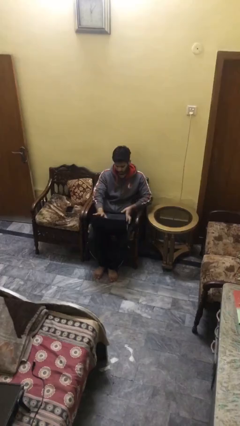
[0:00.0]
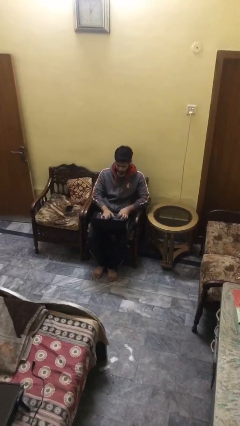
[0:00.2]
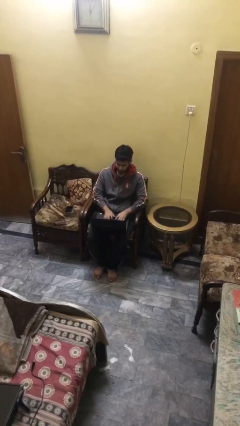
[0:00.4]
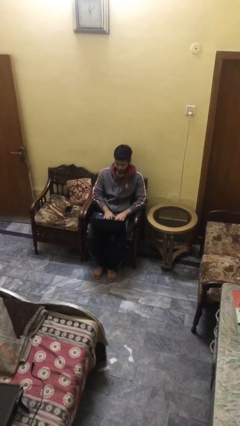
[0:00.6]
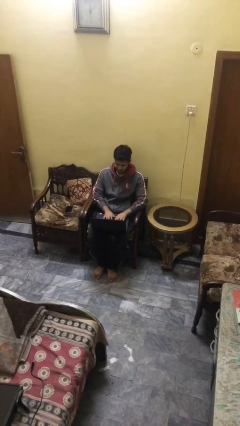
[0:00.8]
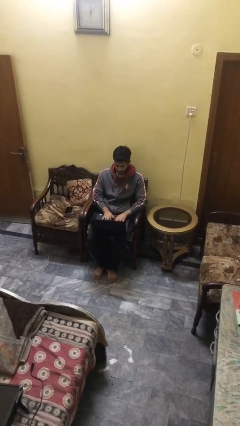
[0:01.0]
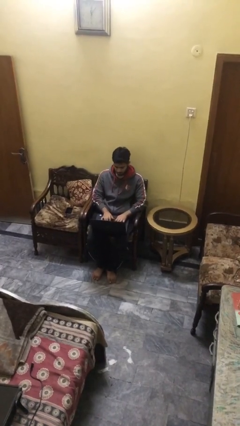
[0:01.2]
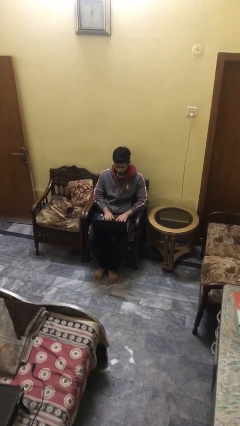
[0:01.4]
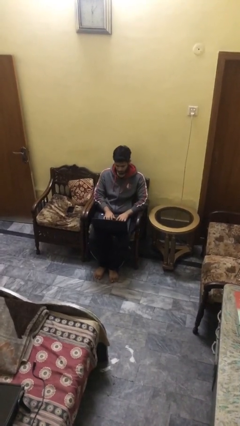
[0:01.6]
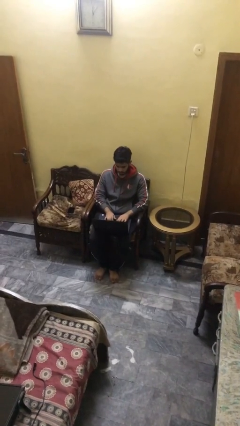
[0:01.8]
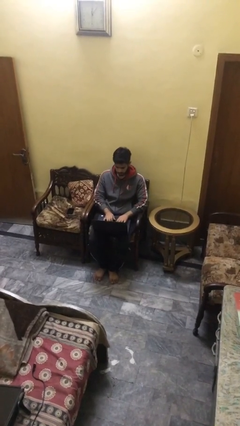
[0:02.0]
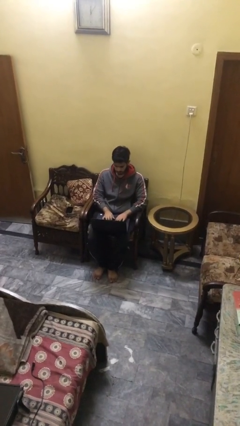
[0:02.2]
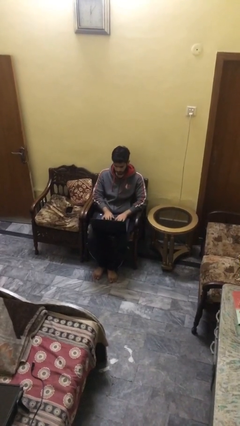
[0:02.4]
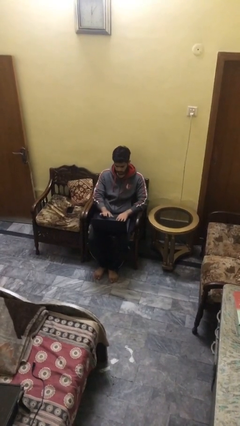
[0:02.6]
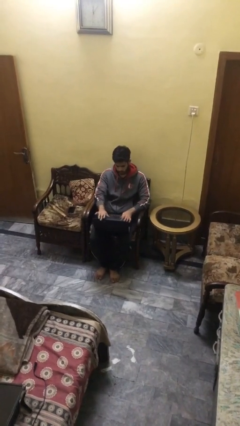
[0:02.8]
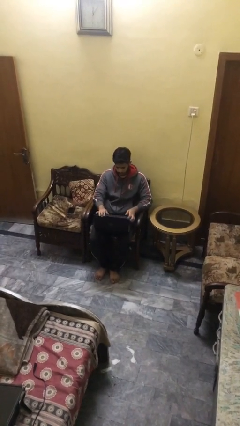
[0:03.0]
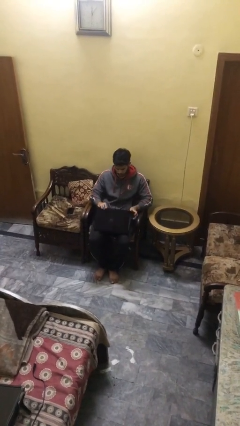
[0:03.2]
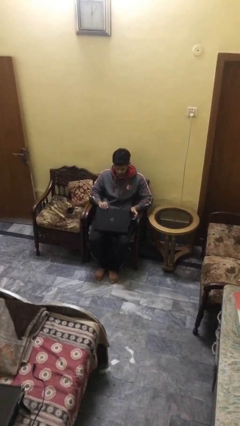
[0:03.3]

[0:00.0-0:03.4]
person interacts with laptop

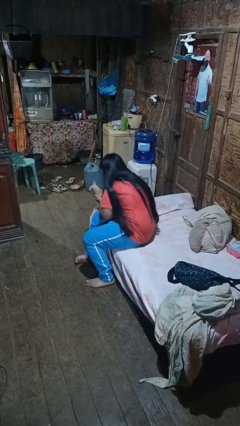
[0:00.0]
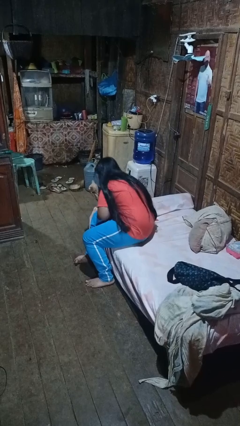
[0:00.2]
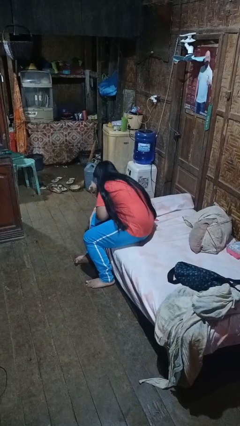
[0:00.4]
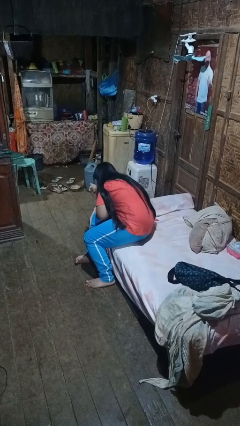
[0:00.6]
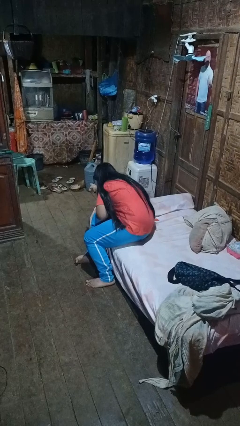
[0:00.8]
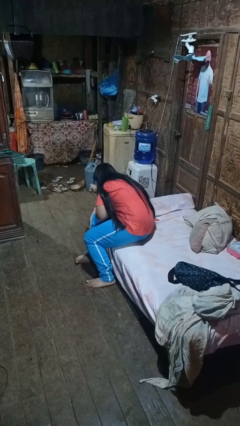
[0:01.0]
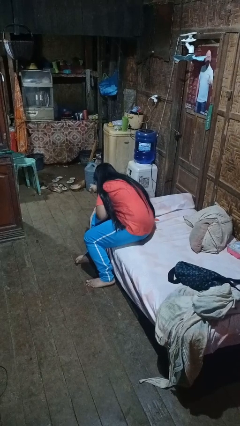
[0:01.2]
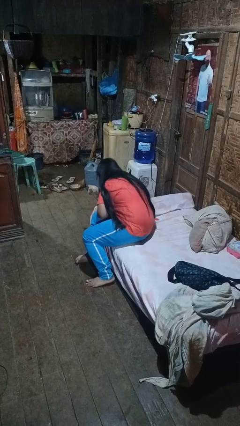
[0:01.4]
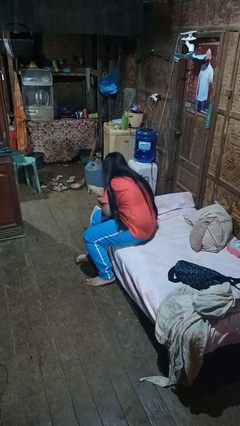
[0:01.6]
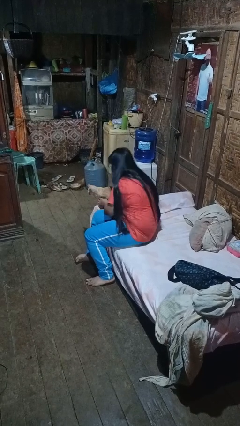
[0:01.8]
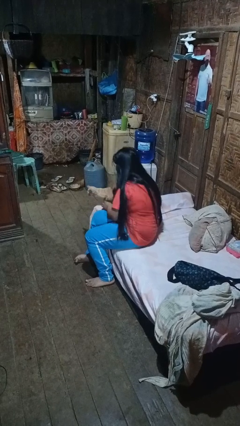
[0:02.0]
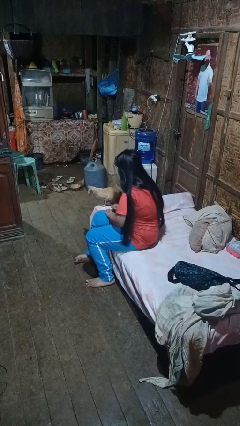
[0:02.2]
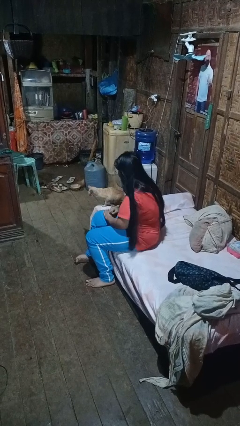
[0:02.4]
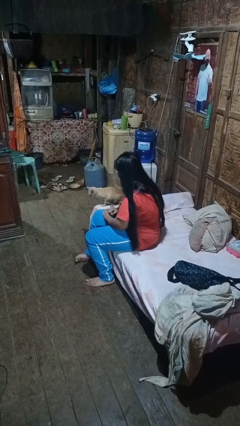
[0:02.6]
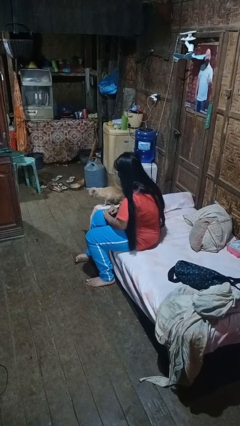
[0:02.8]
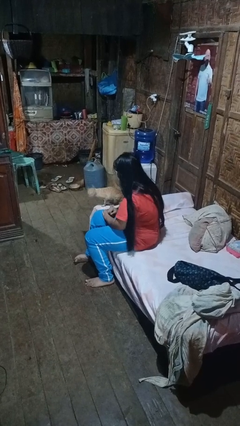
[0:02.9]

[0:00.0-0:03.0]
person hugs cat

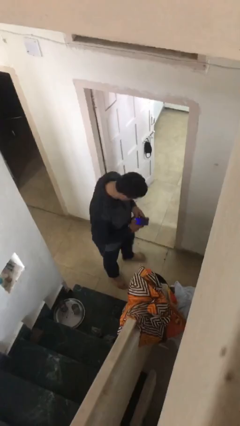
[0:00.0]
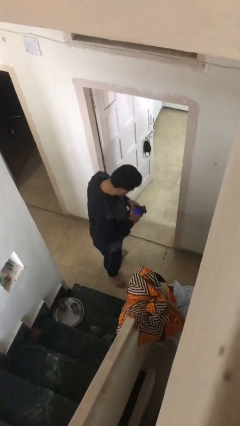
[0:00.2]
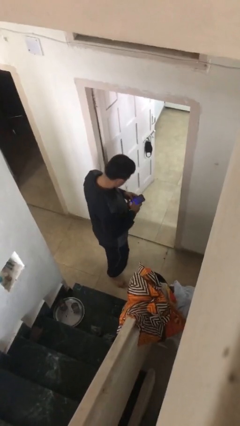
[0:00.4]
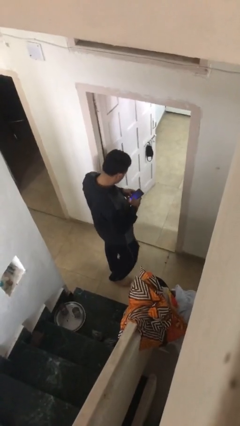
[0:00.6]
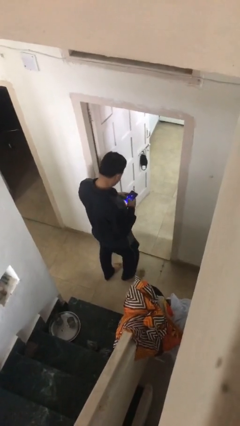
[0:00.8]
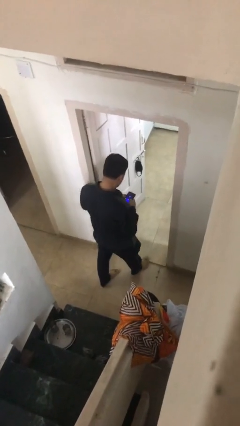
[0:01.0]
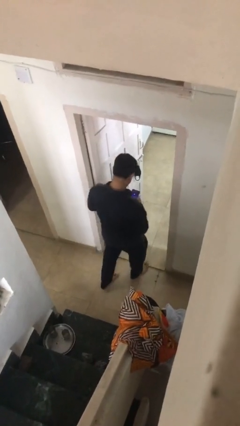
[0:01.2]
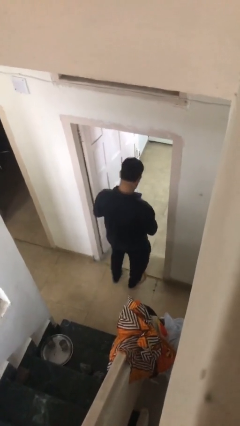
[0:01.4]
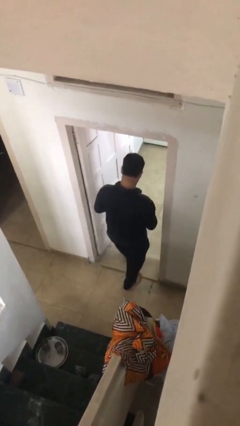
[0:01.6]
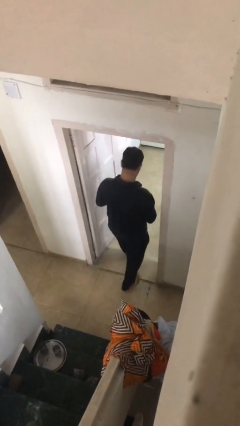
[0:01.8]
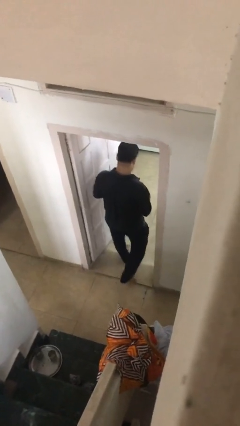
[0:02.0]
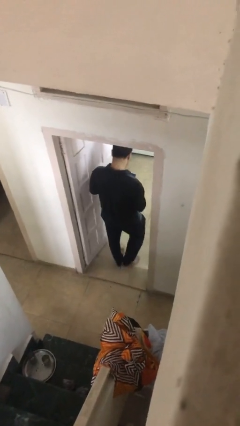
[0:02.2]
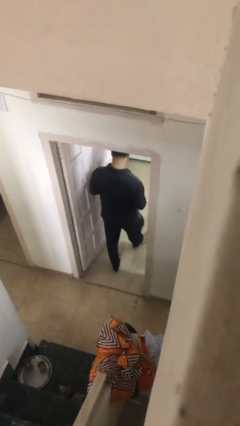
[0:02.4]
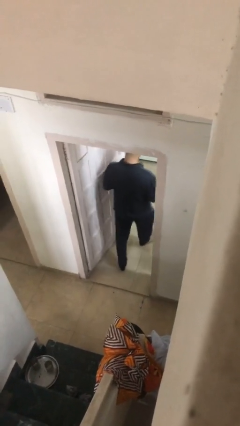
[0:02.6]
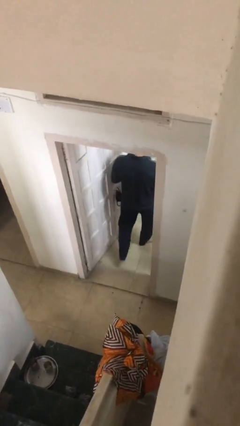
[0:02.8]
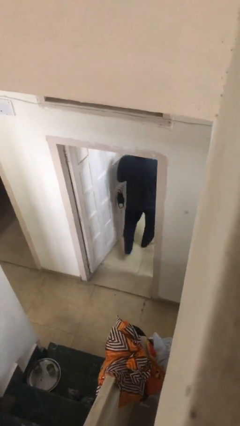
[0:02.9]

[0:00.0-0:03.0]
person exits scene through structure

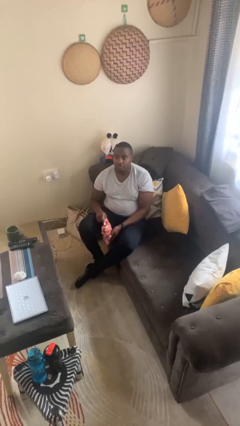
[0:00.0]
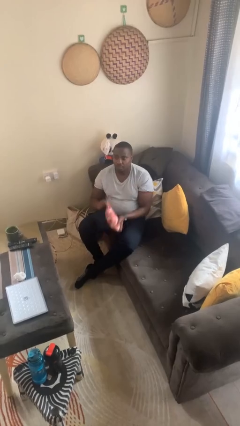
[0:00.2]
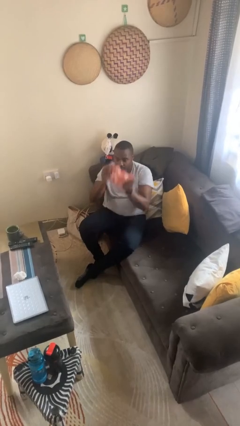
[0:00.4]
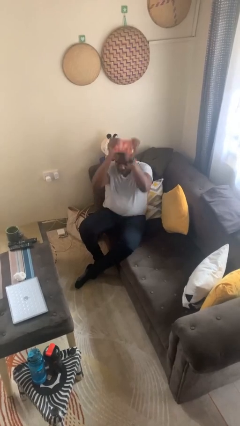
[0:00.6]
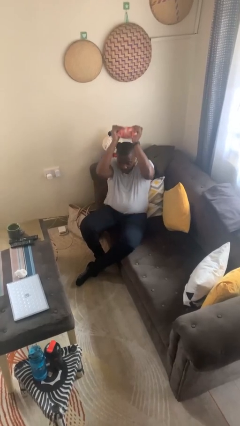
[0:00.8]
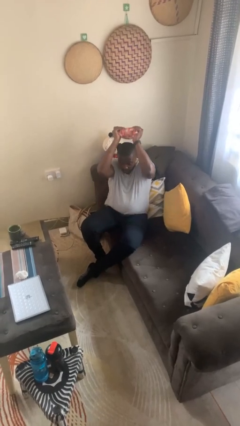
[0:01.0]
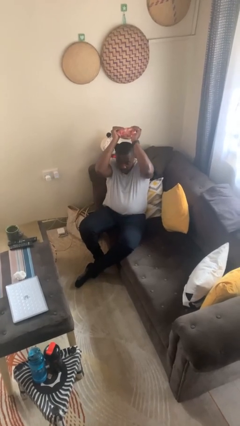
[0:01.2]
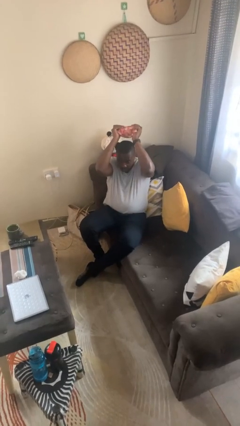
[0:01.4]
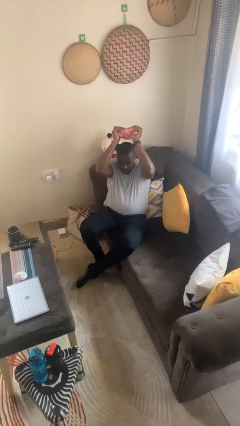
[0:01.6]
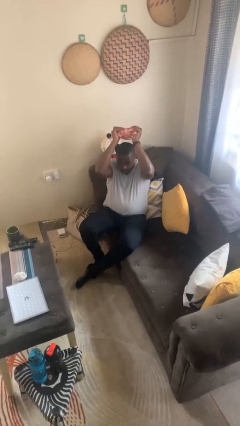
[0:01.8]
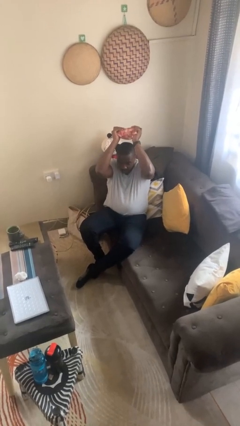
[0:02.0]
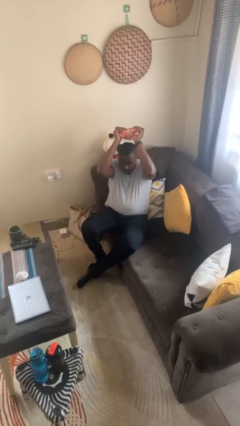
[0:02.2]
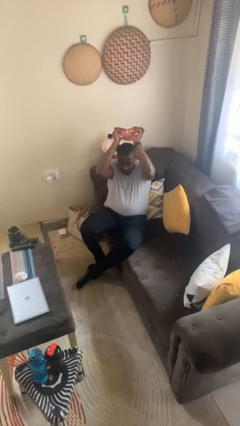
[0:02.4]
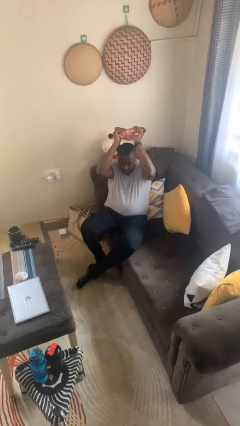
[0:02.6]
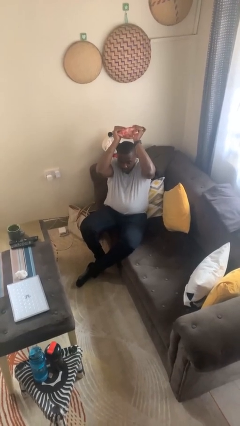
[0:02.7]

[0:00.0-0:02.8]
person holds object above head

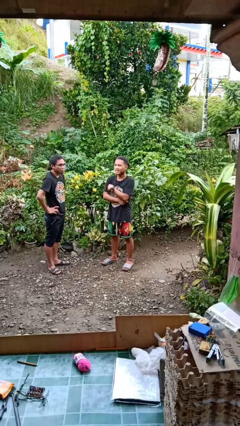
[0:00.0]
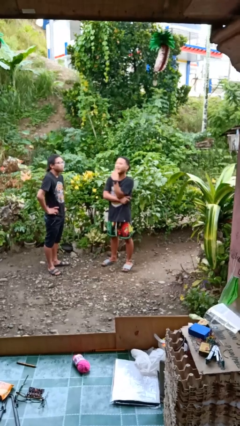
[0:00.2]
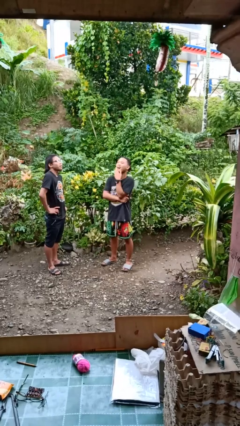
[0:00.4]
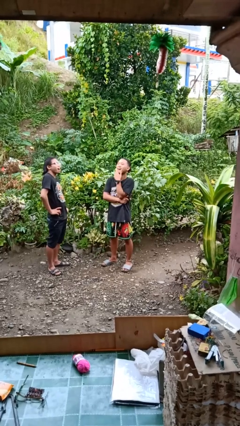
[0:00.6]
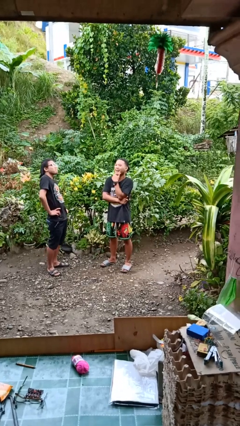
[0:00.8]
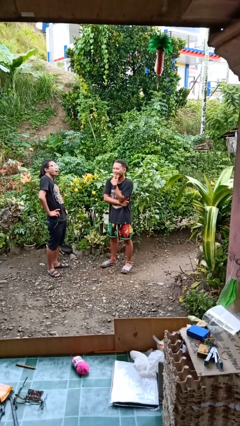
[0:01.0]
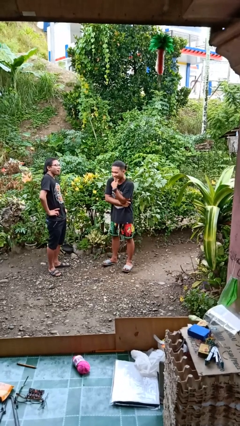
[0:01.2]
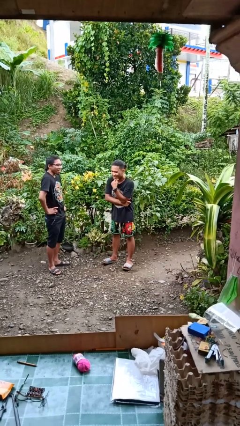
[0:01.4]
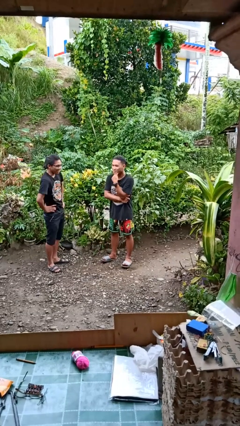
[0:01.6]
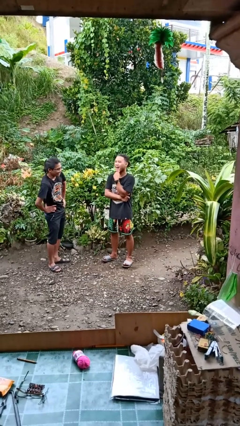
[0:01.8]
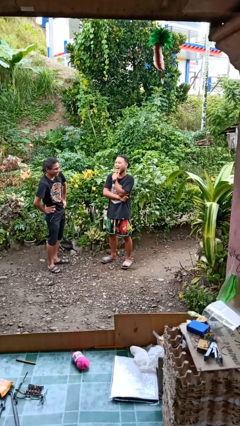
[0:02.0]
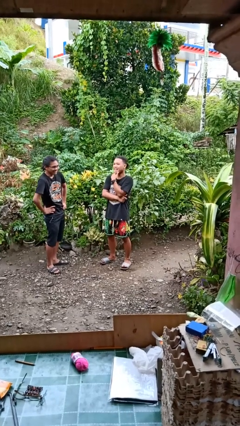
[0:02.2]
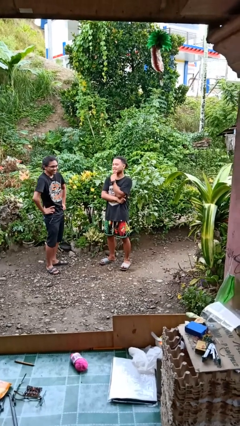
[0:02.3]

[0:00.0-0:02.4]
person laughs with person

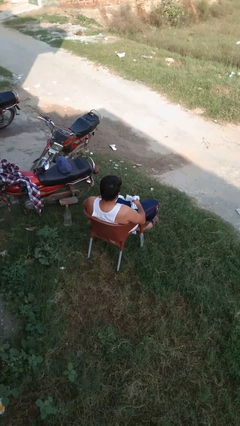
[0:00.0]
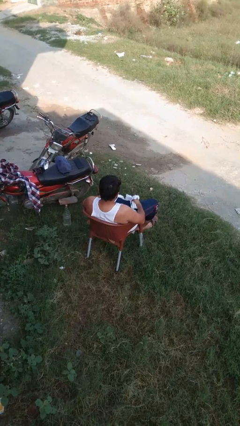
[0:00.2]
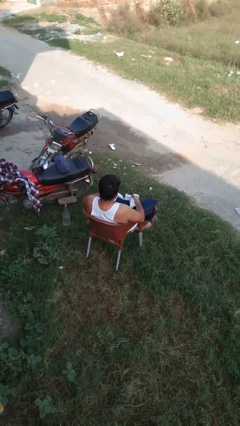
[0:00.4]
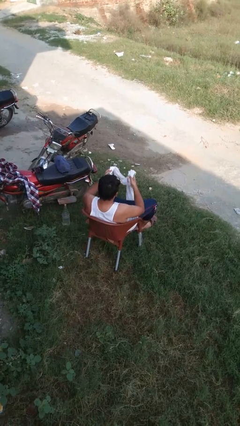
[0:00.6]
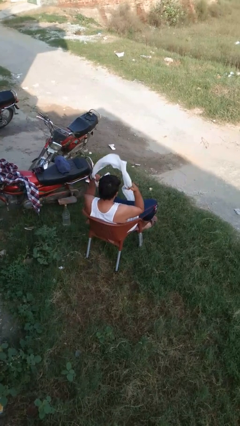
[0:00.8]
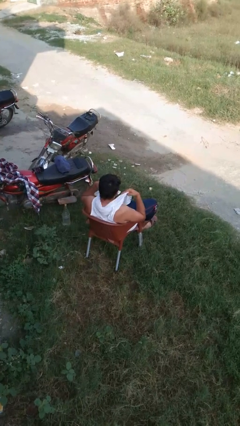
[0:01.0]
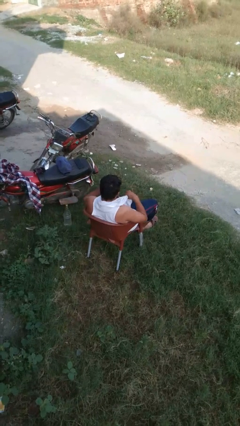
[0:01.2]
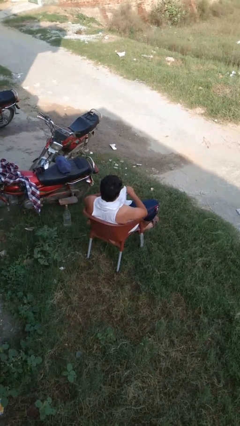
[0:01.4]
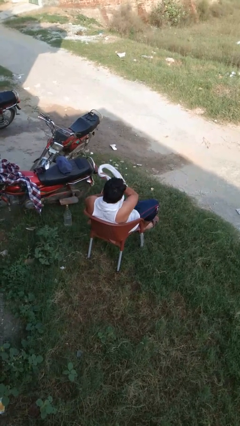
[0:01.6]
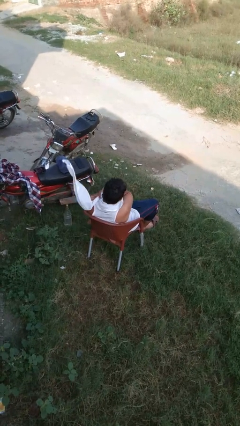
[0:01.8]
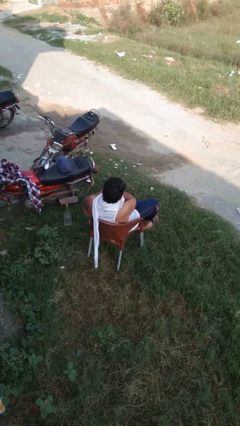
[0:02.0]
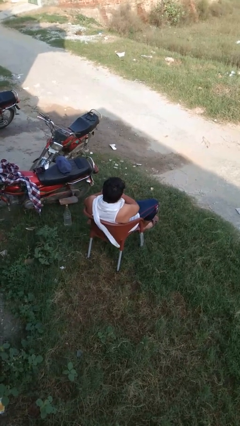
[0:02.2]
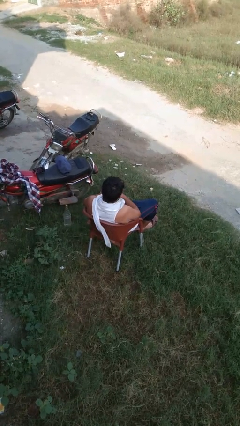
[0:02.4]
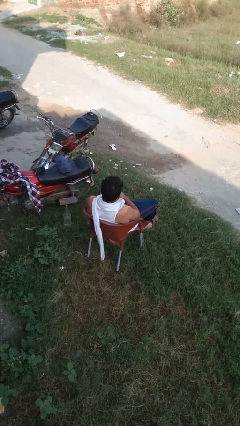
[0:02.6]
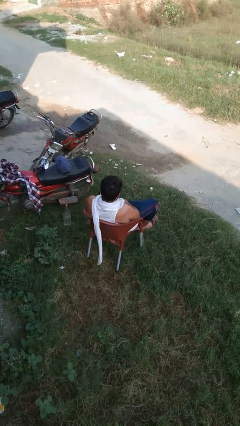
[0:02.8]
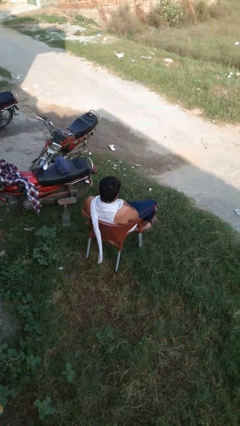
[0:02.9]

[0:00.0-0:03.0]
person puts on scarf
